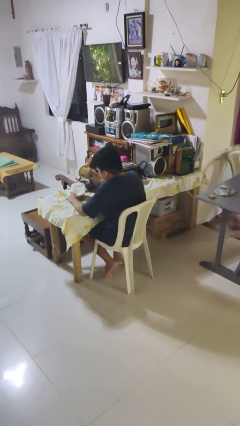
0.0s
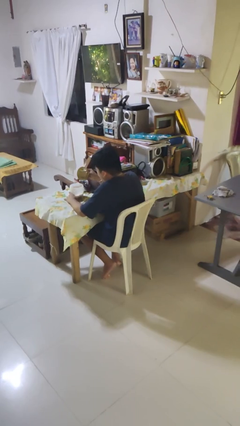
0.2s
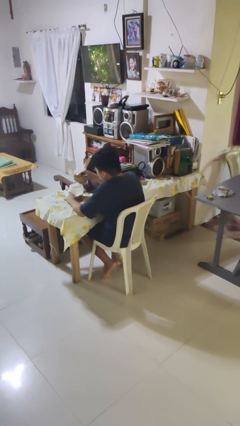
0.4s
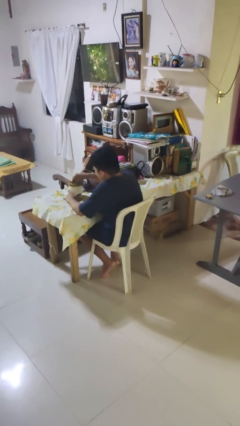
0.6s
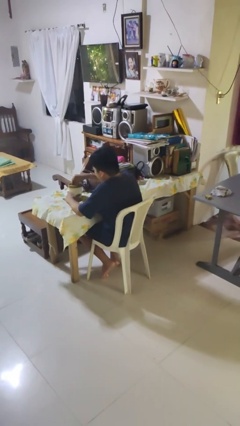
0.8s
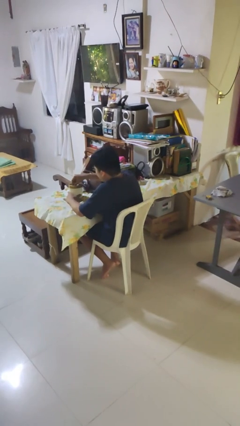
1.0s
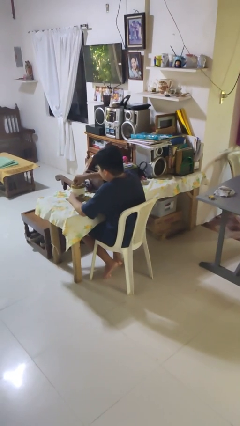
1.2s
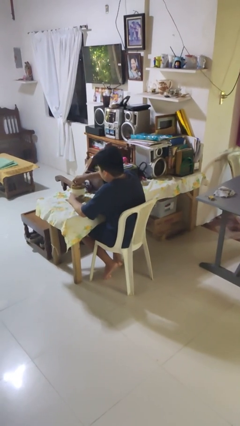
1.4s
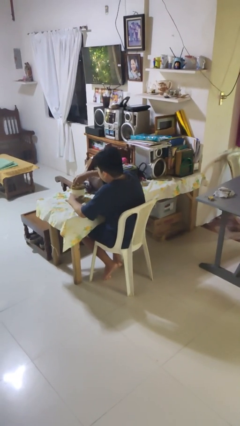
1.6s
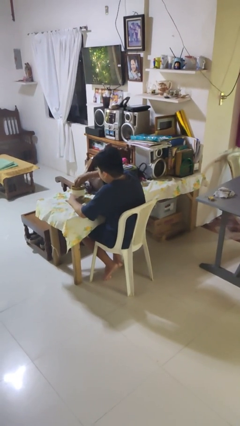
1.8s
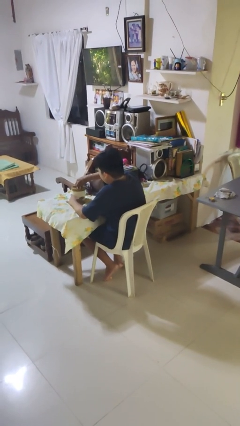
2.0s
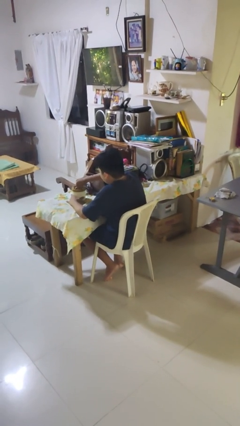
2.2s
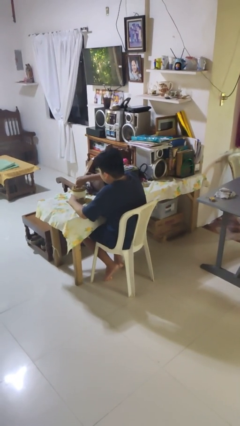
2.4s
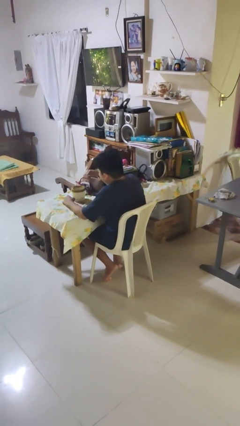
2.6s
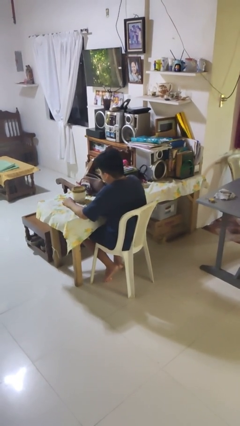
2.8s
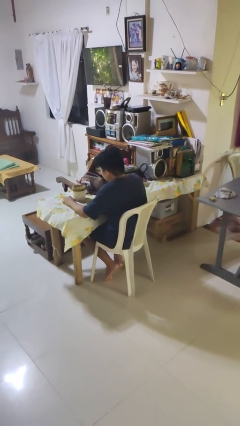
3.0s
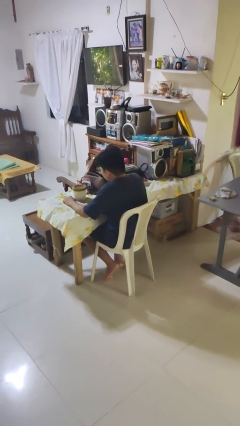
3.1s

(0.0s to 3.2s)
person closes jar

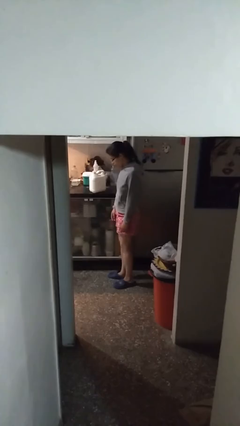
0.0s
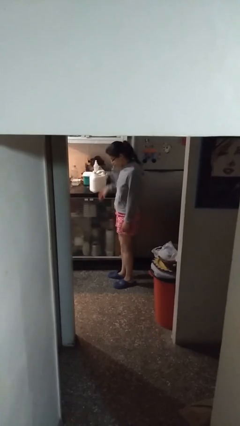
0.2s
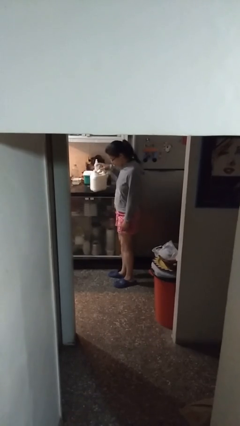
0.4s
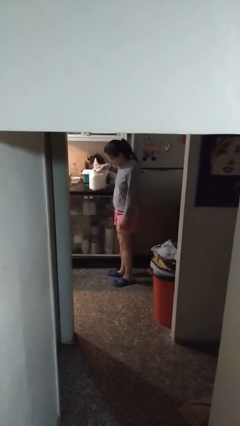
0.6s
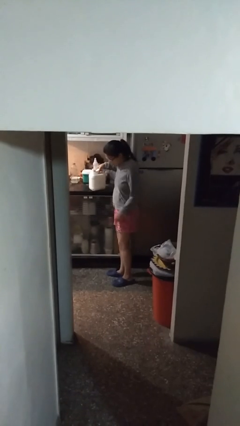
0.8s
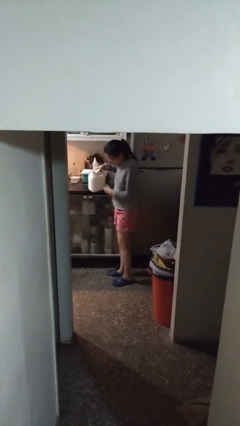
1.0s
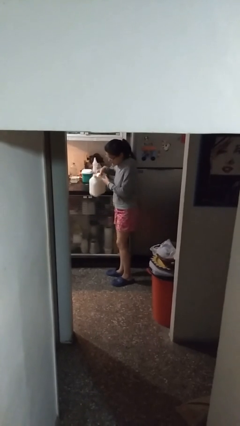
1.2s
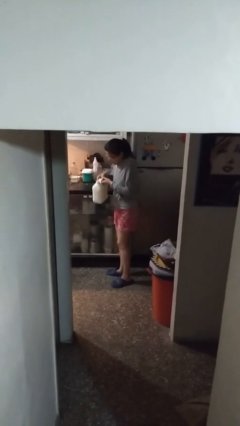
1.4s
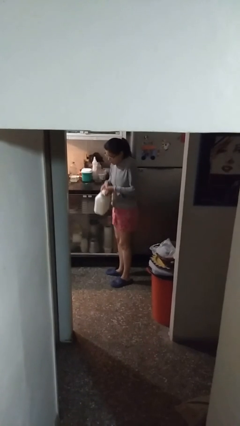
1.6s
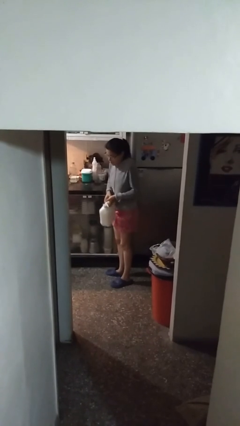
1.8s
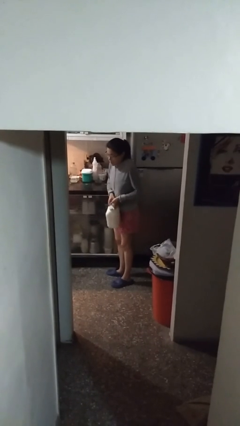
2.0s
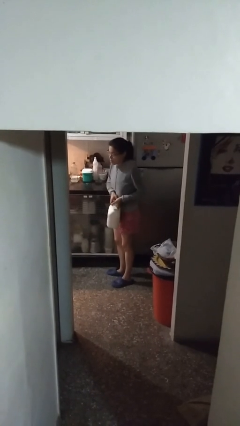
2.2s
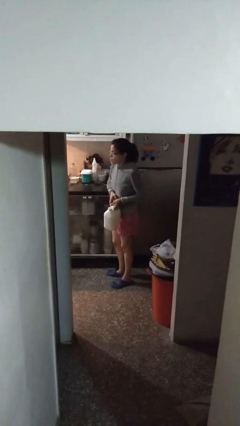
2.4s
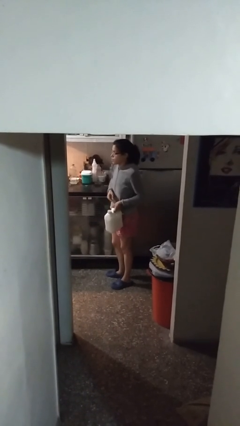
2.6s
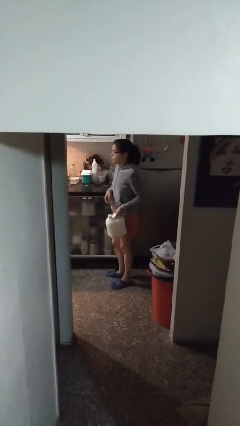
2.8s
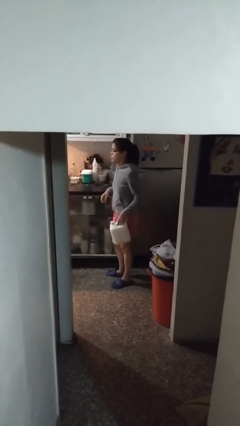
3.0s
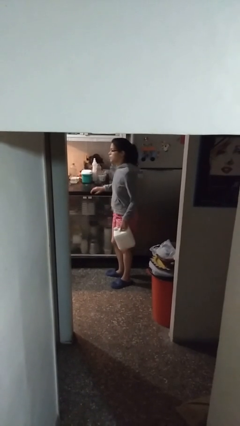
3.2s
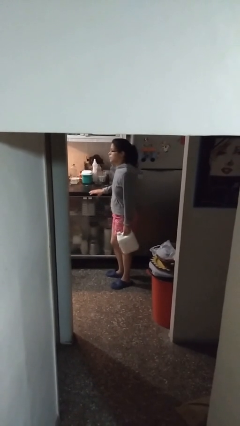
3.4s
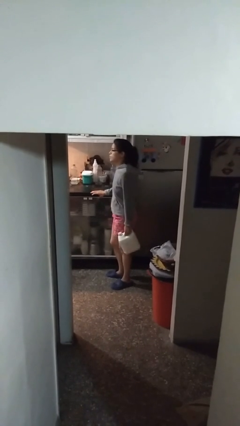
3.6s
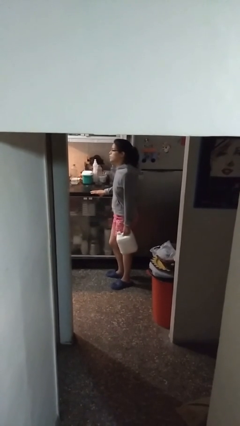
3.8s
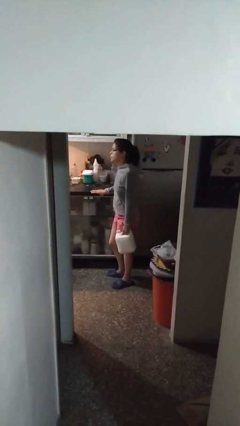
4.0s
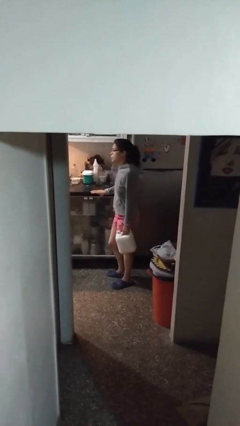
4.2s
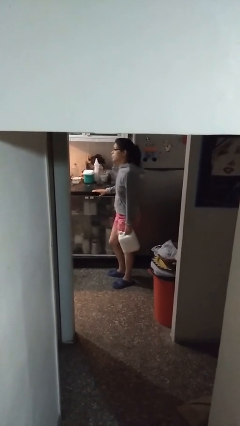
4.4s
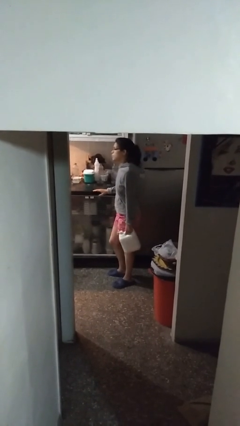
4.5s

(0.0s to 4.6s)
person picks up object from countertop

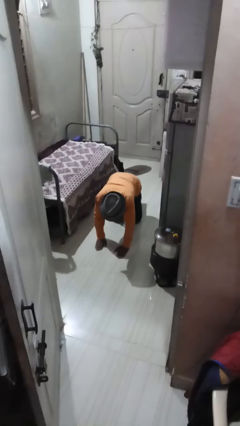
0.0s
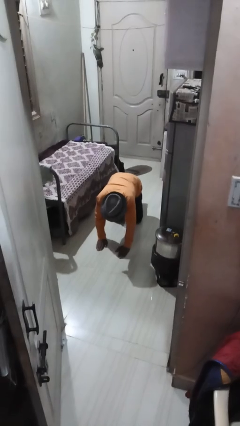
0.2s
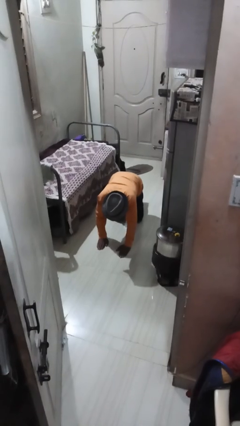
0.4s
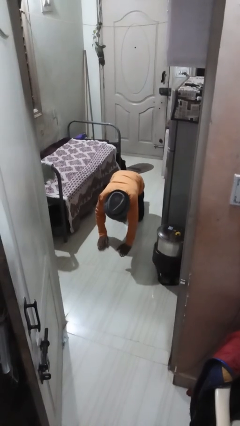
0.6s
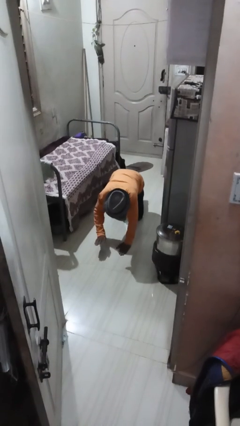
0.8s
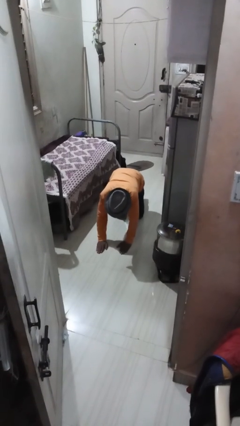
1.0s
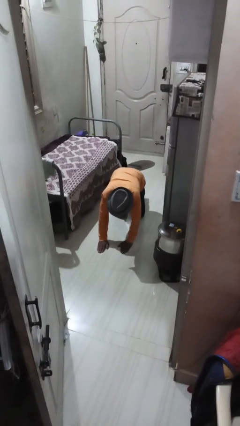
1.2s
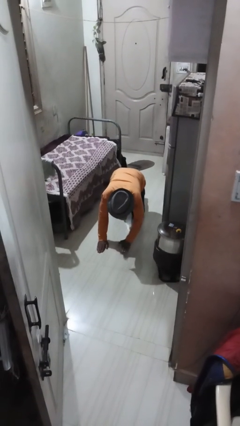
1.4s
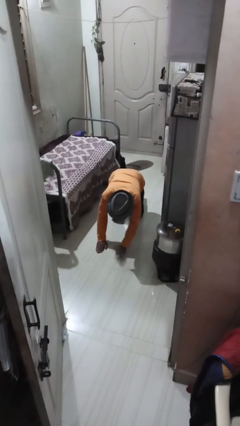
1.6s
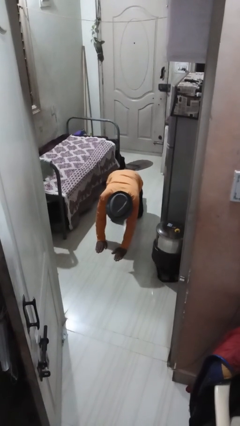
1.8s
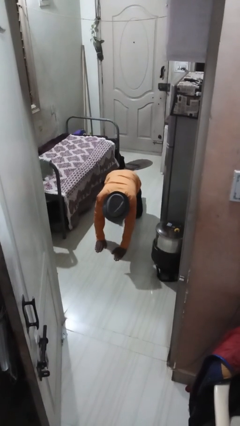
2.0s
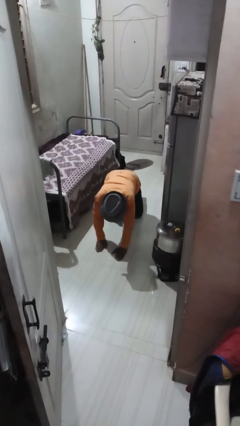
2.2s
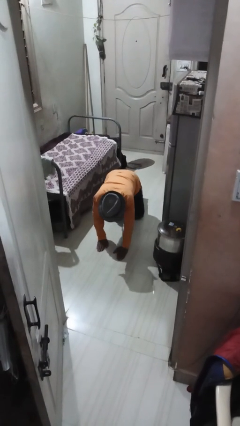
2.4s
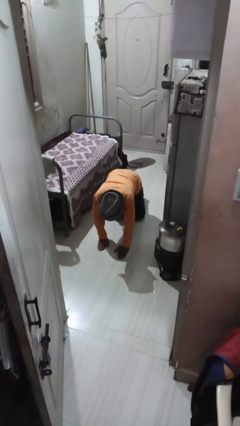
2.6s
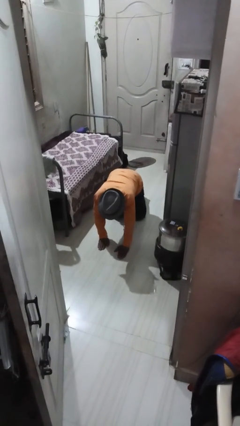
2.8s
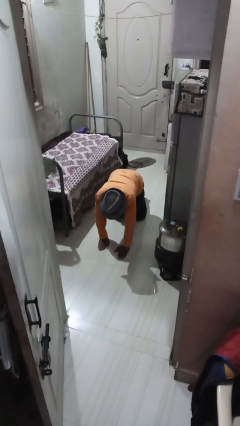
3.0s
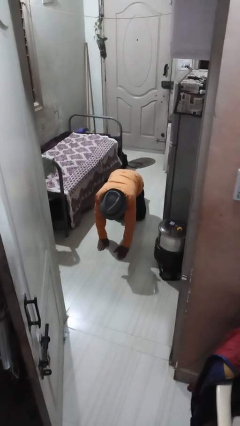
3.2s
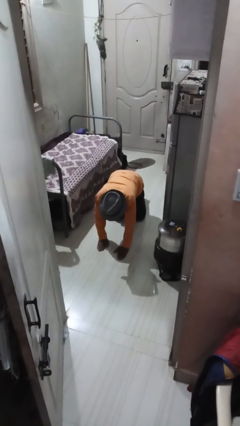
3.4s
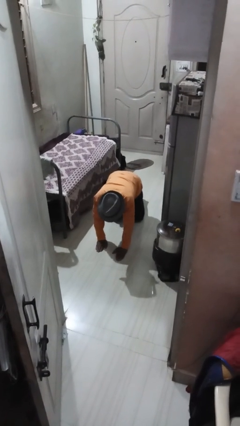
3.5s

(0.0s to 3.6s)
person crawls

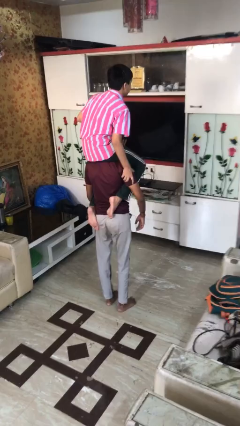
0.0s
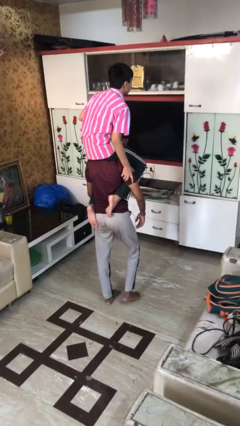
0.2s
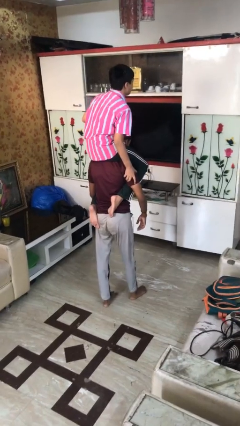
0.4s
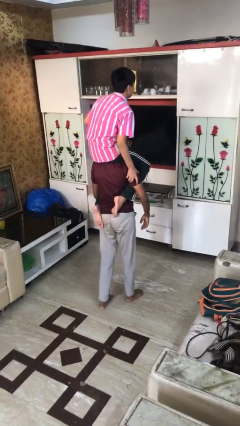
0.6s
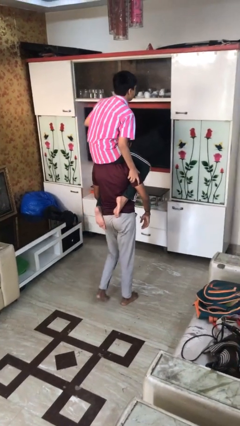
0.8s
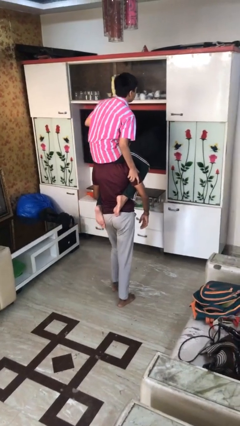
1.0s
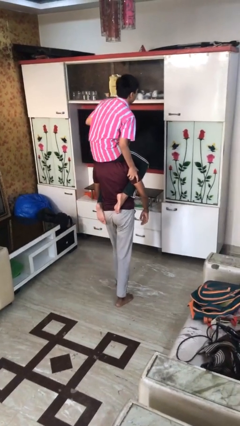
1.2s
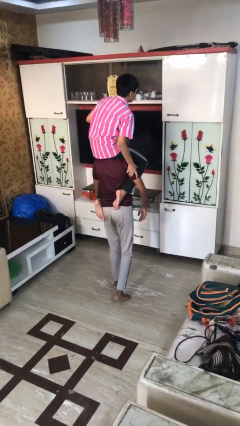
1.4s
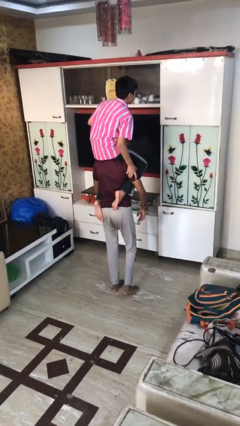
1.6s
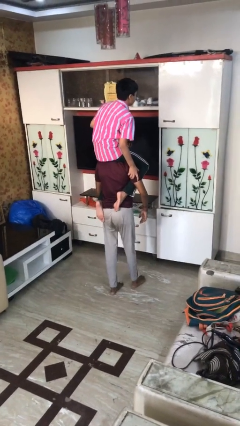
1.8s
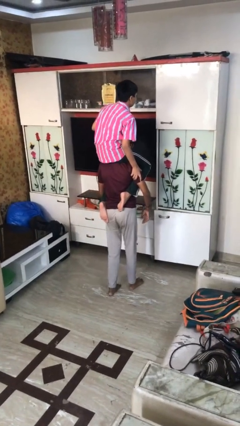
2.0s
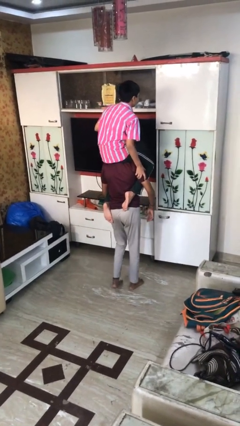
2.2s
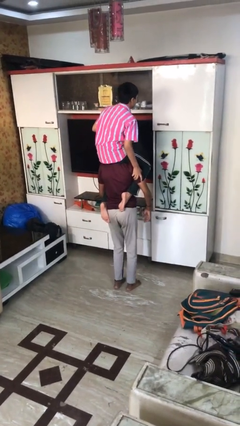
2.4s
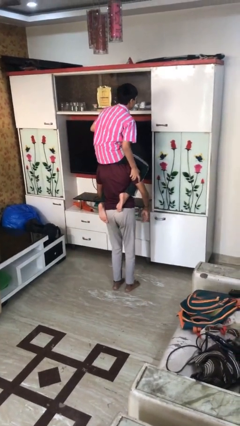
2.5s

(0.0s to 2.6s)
person carries person on shoulders

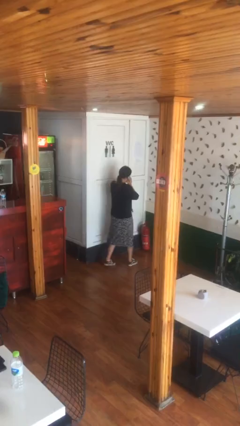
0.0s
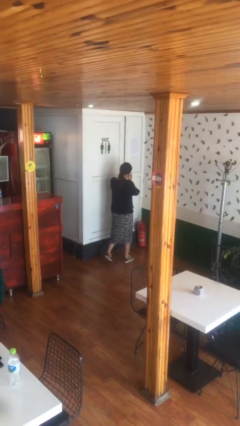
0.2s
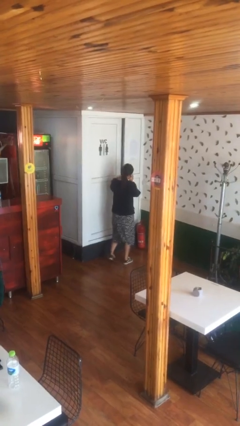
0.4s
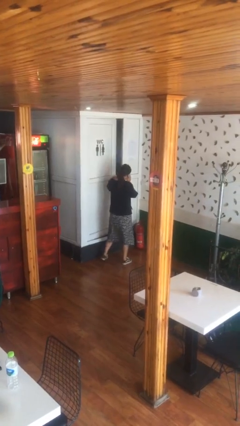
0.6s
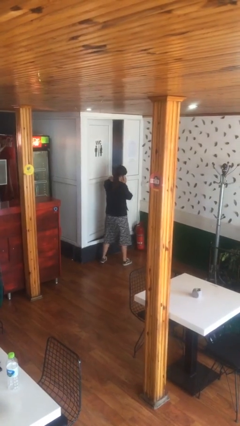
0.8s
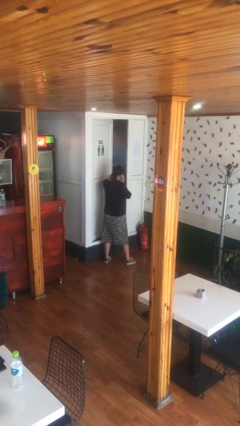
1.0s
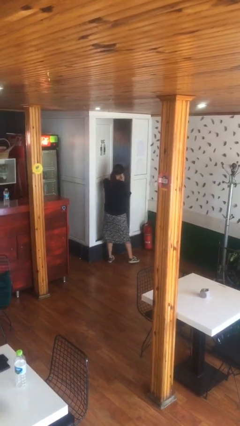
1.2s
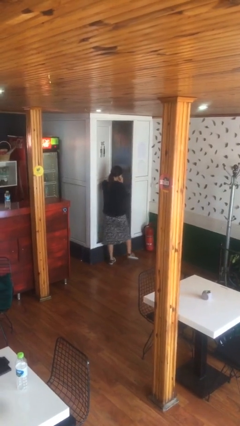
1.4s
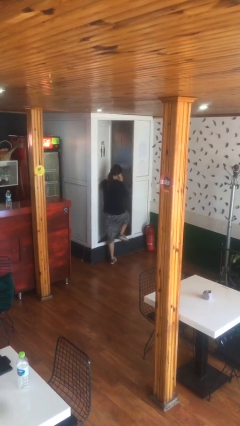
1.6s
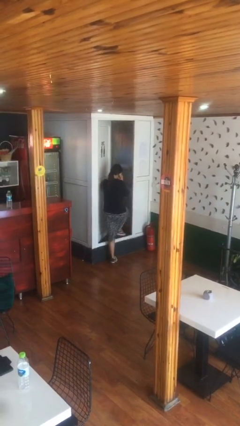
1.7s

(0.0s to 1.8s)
person opens facility door

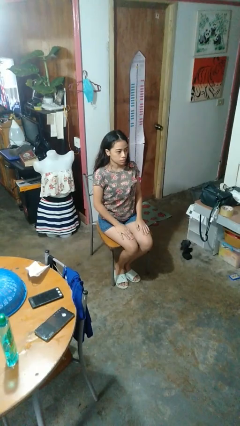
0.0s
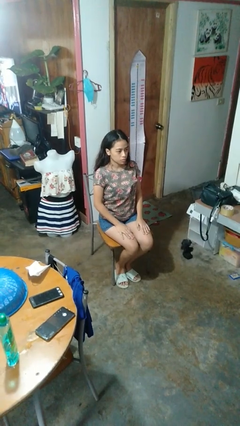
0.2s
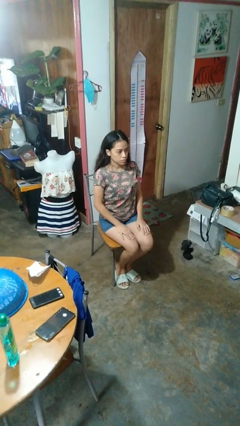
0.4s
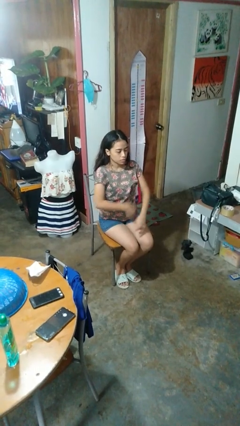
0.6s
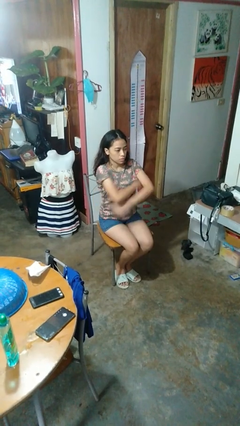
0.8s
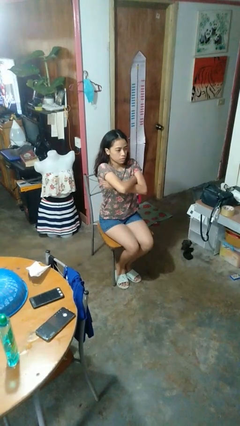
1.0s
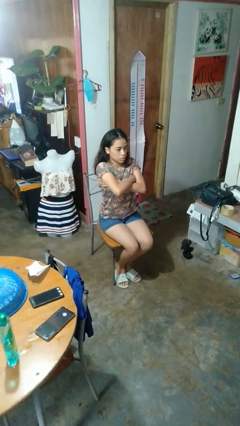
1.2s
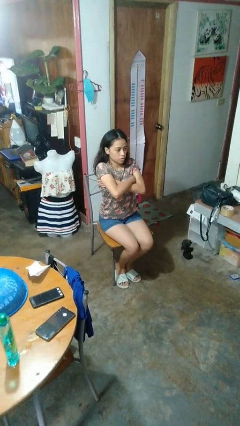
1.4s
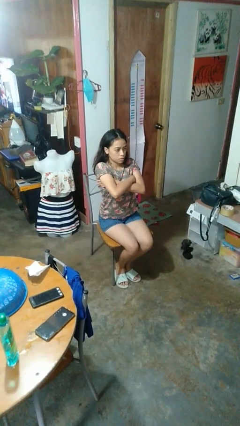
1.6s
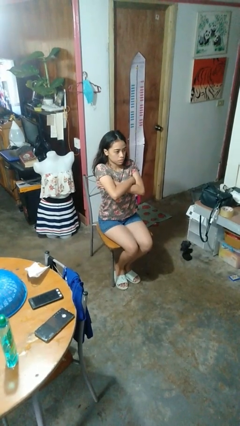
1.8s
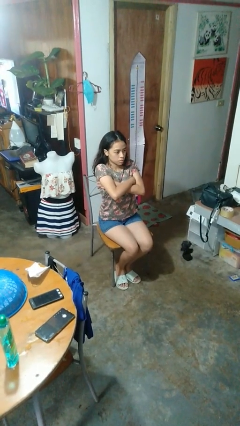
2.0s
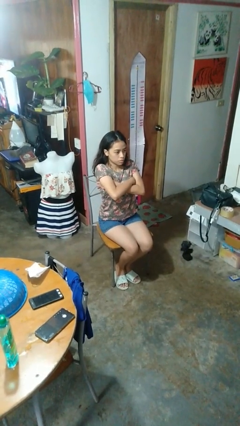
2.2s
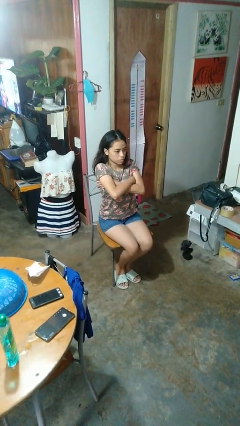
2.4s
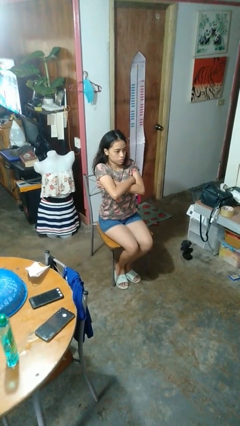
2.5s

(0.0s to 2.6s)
person crosses arms
